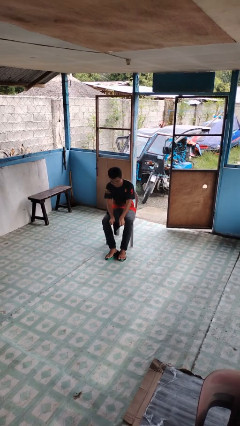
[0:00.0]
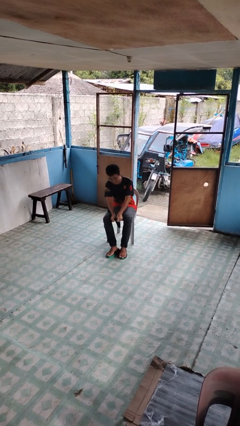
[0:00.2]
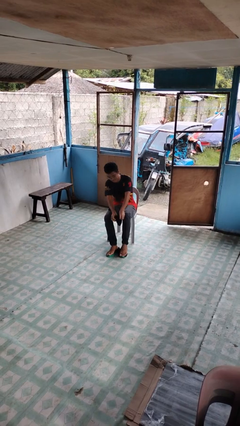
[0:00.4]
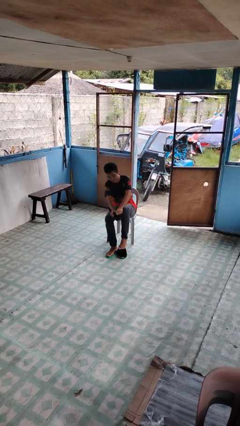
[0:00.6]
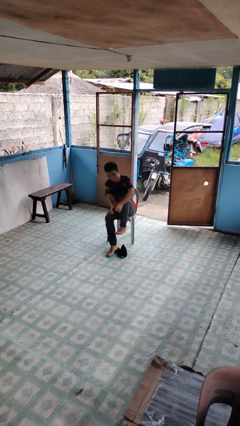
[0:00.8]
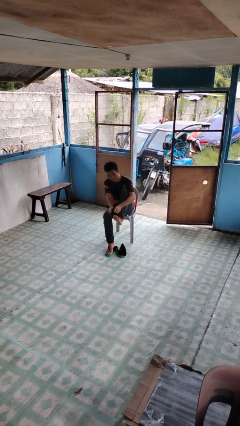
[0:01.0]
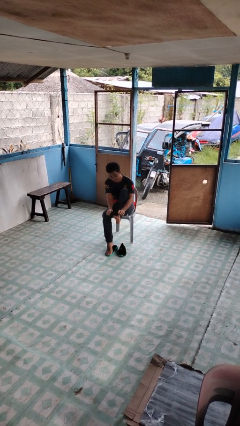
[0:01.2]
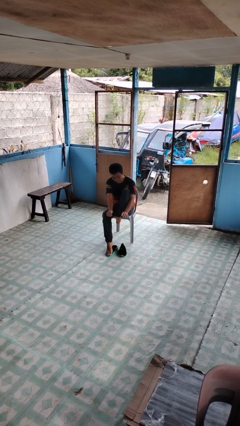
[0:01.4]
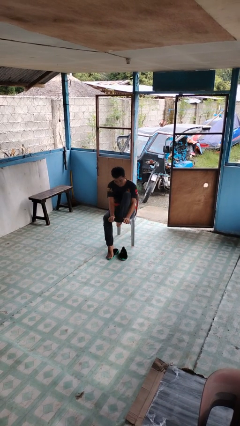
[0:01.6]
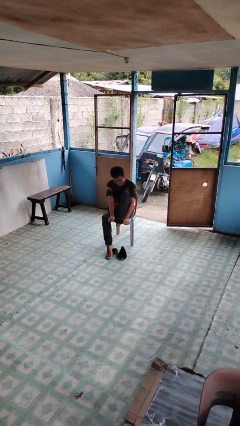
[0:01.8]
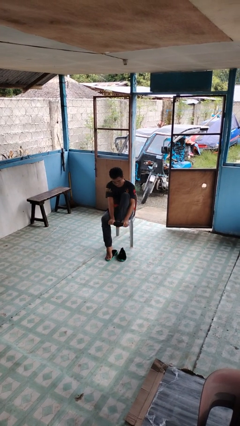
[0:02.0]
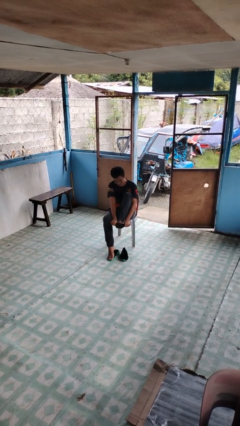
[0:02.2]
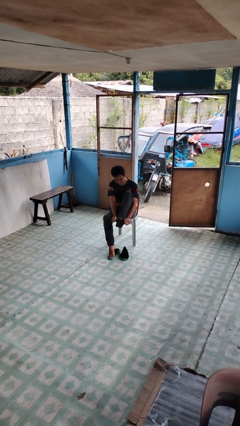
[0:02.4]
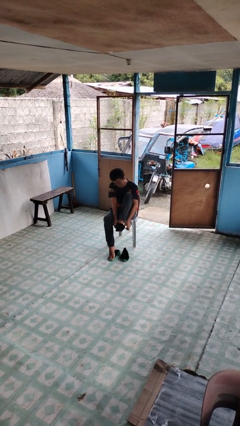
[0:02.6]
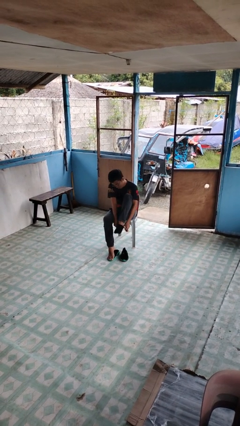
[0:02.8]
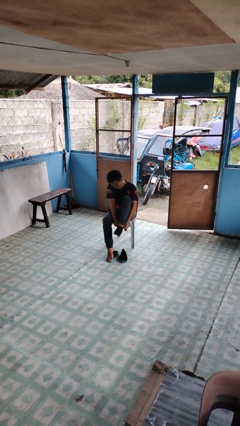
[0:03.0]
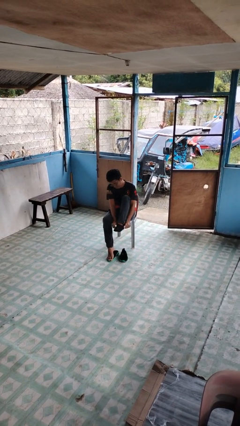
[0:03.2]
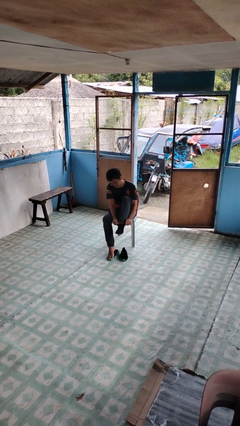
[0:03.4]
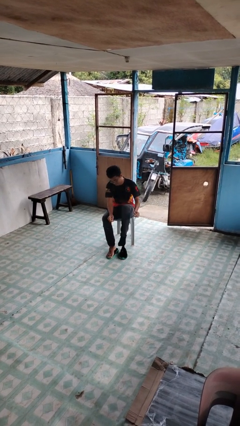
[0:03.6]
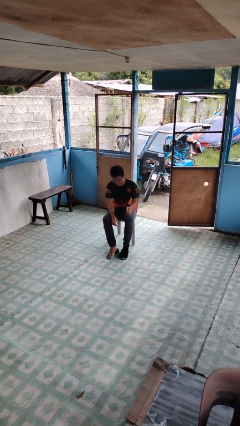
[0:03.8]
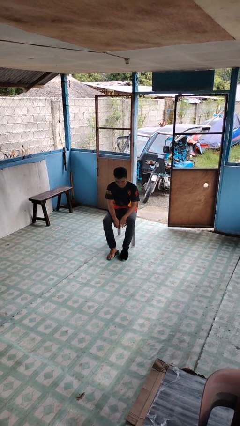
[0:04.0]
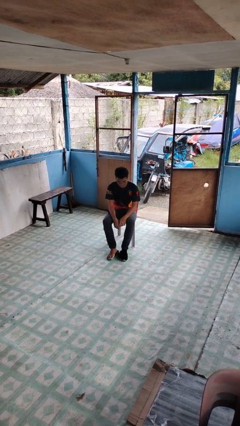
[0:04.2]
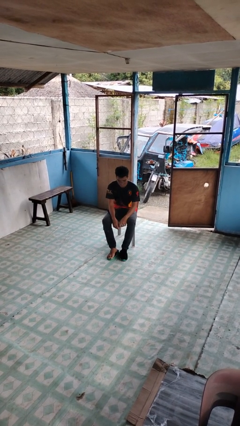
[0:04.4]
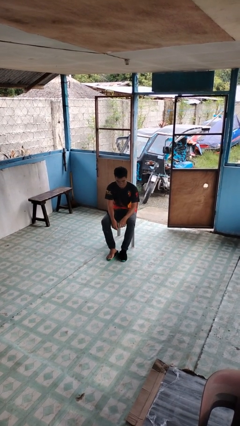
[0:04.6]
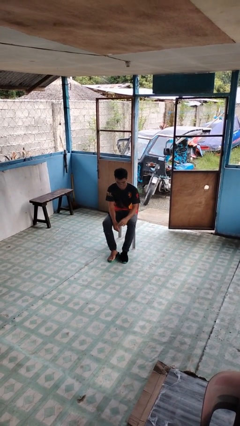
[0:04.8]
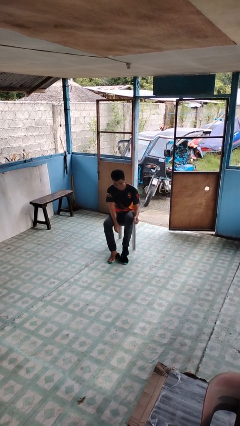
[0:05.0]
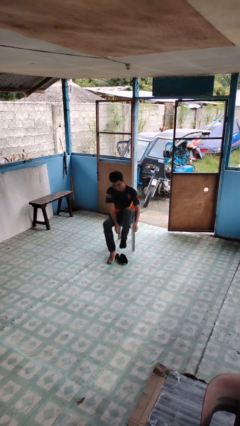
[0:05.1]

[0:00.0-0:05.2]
person puts on socks

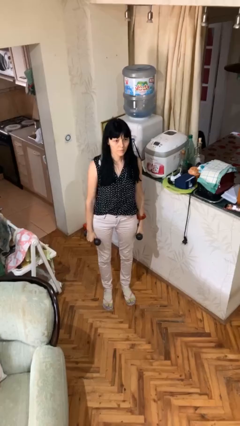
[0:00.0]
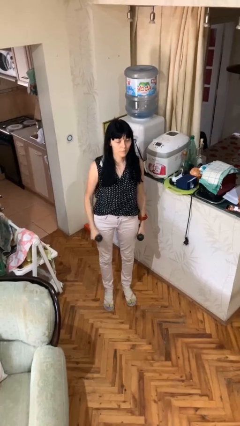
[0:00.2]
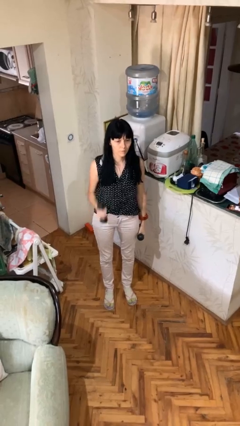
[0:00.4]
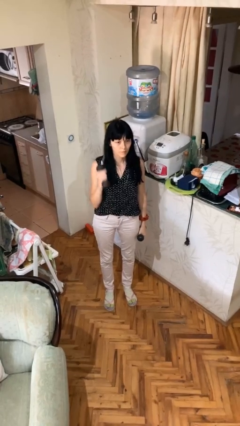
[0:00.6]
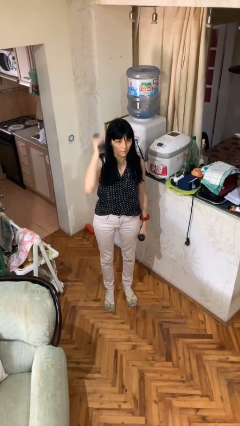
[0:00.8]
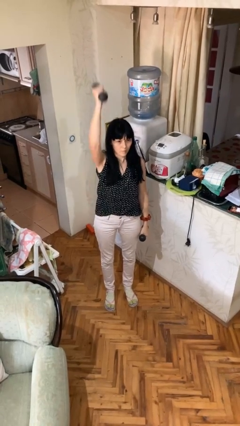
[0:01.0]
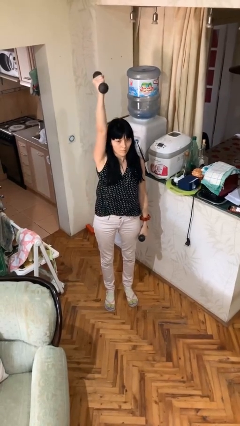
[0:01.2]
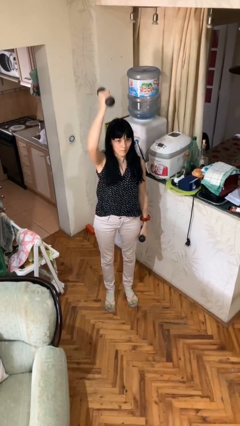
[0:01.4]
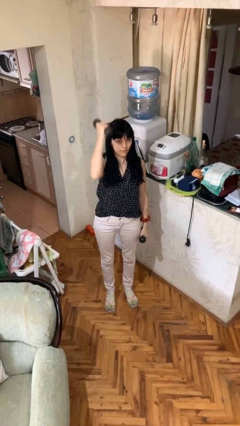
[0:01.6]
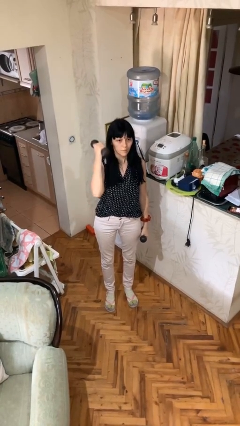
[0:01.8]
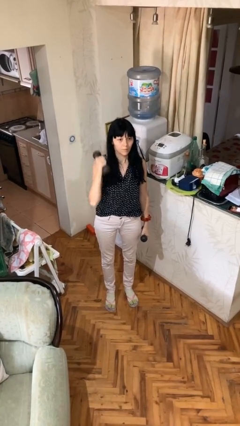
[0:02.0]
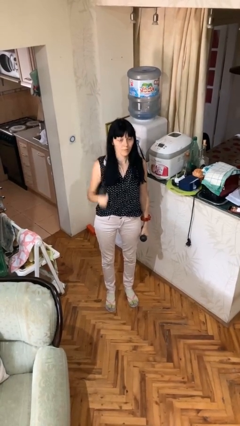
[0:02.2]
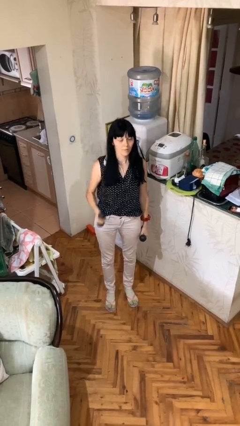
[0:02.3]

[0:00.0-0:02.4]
person lifts dumbbells

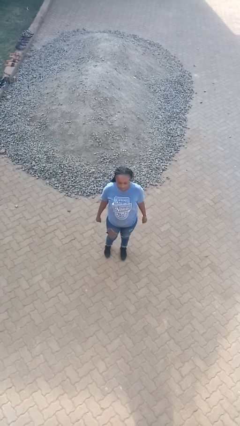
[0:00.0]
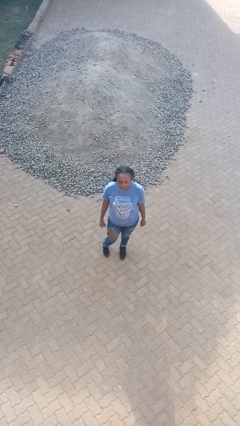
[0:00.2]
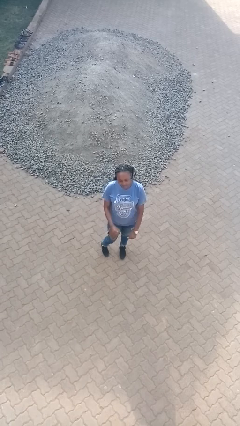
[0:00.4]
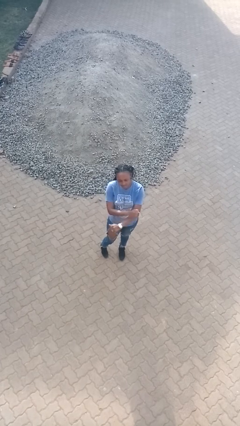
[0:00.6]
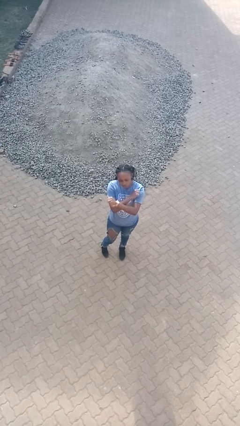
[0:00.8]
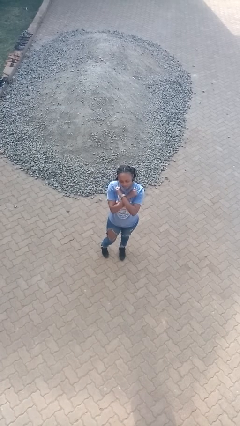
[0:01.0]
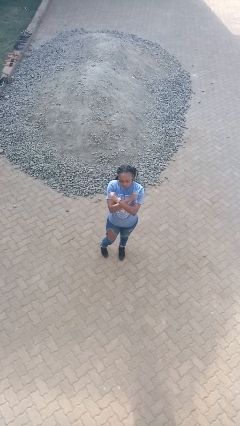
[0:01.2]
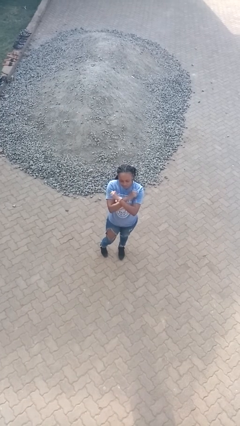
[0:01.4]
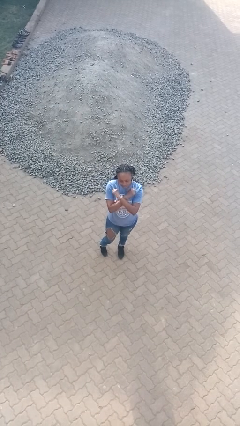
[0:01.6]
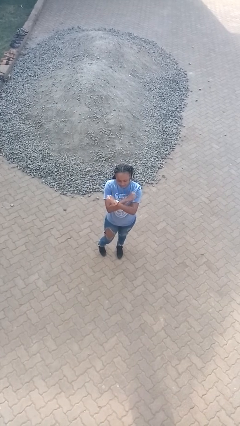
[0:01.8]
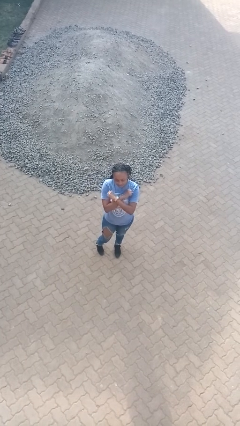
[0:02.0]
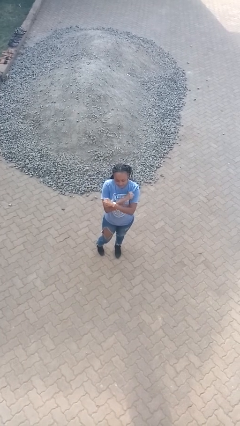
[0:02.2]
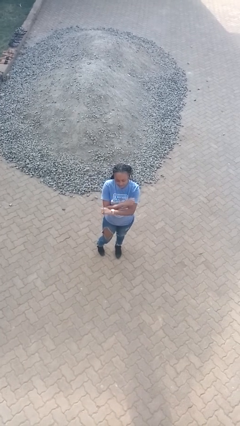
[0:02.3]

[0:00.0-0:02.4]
person gestures arms x

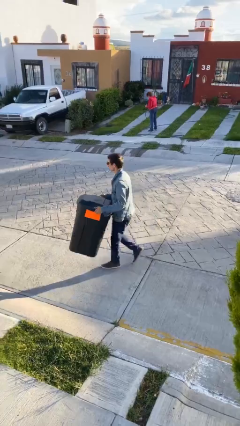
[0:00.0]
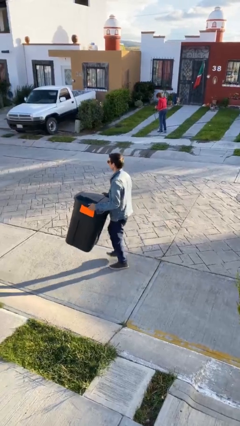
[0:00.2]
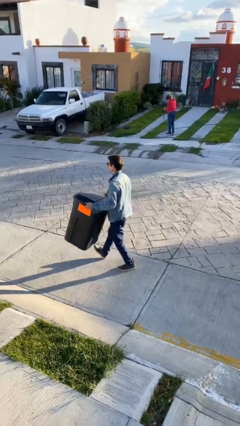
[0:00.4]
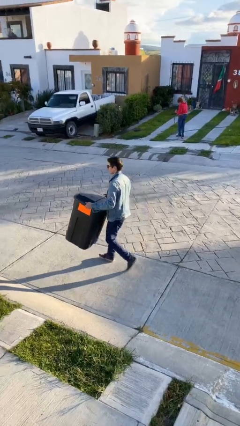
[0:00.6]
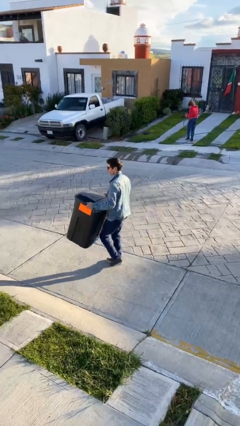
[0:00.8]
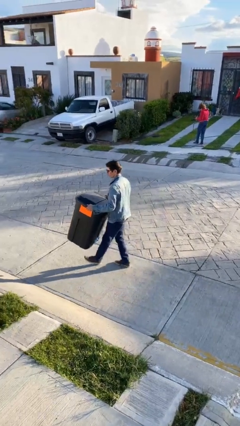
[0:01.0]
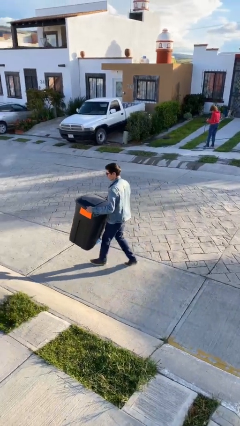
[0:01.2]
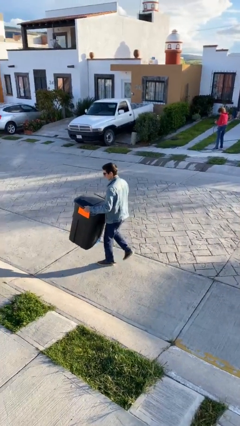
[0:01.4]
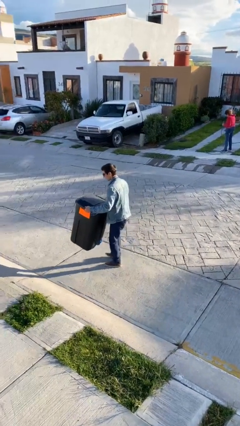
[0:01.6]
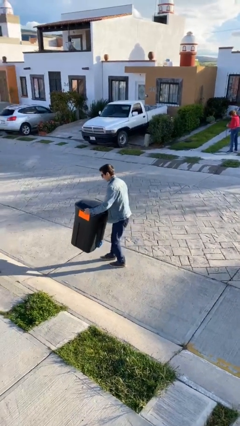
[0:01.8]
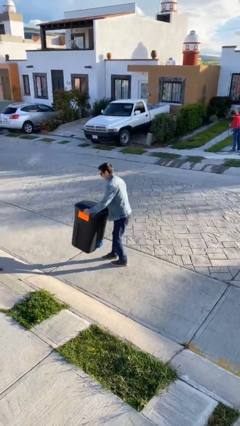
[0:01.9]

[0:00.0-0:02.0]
person carries heavy object

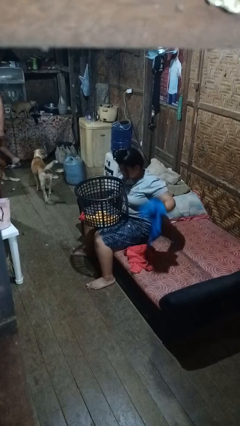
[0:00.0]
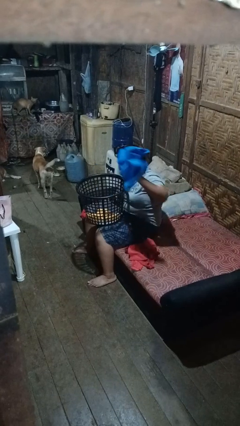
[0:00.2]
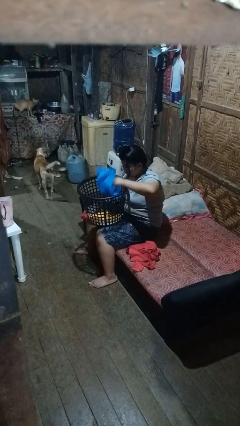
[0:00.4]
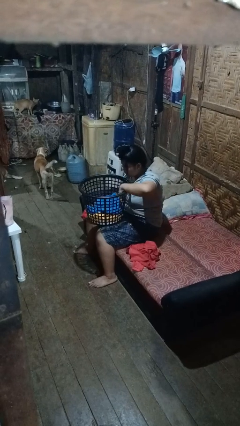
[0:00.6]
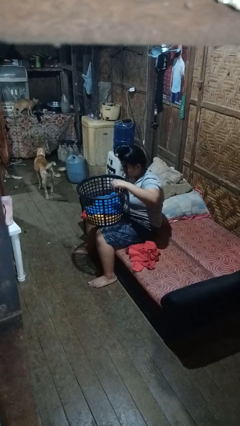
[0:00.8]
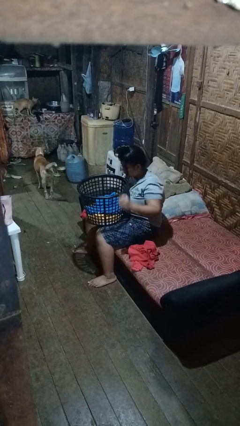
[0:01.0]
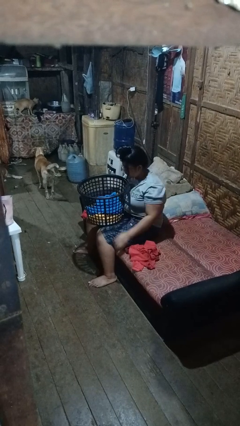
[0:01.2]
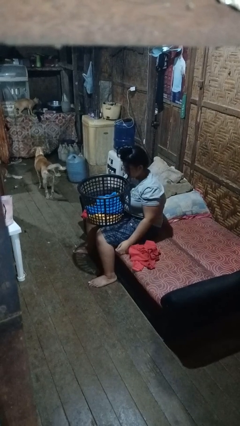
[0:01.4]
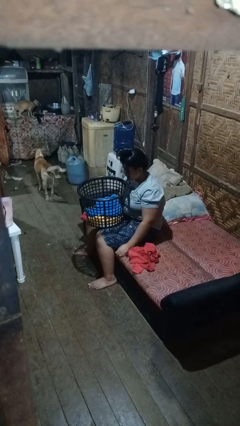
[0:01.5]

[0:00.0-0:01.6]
person puts object into basket

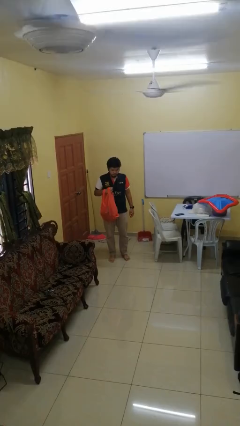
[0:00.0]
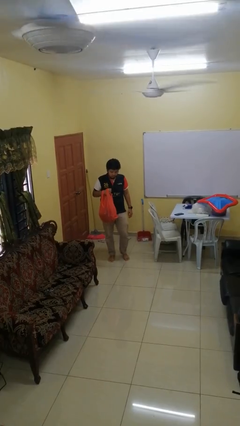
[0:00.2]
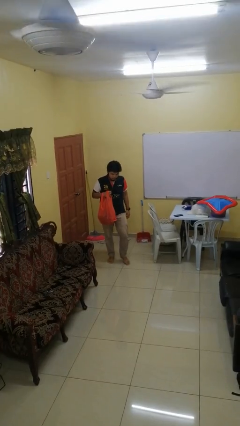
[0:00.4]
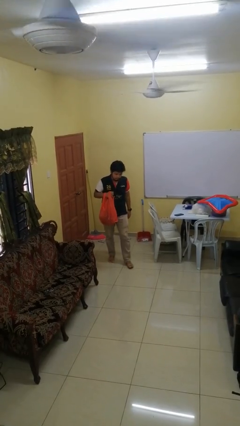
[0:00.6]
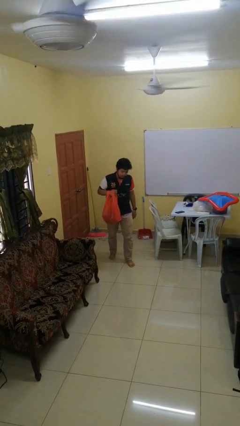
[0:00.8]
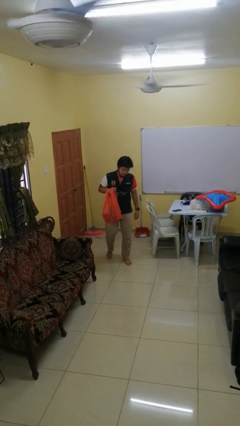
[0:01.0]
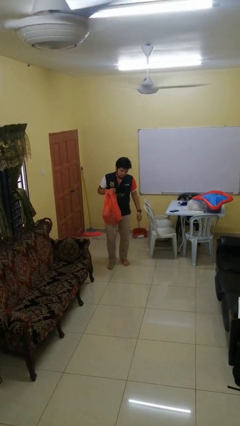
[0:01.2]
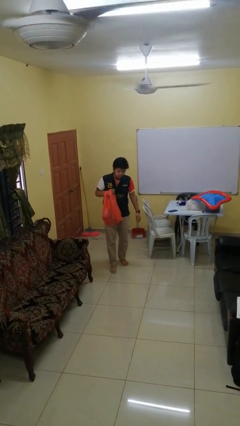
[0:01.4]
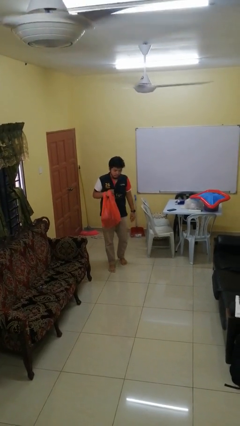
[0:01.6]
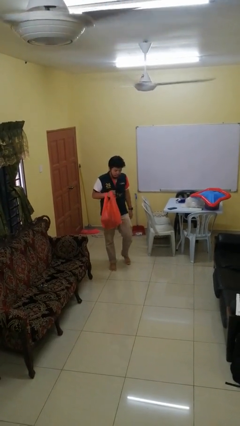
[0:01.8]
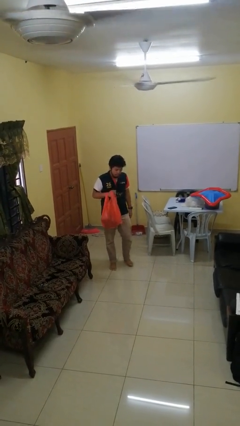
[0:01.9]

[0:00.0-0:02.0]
person carries groceries

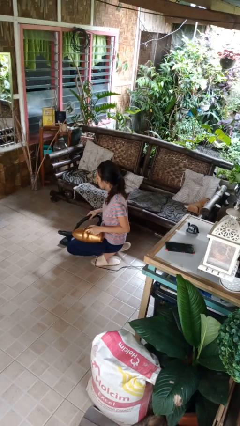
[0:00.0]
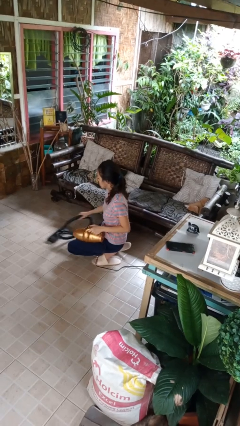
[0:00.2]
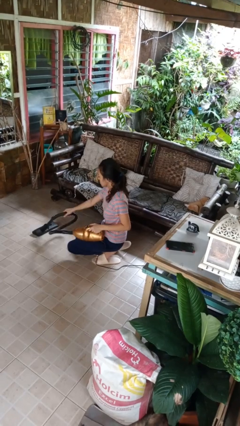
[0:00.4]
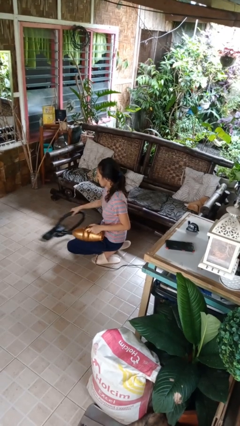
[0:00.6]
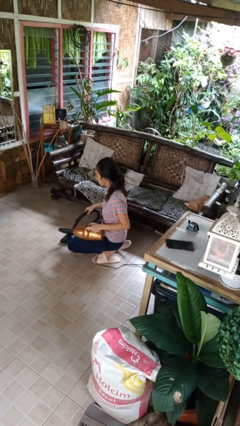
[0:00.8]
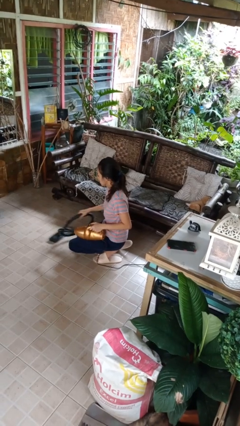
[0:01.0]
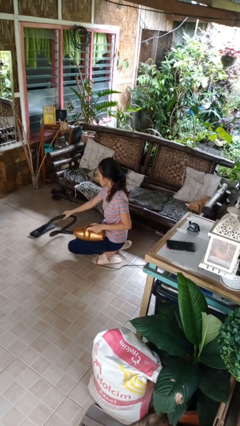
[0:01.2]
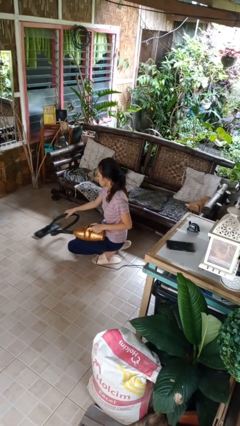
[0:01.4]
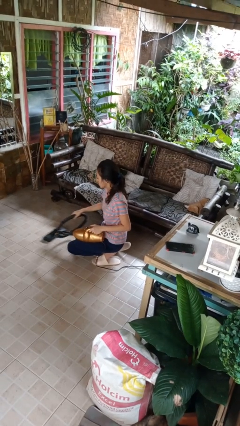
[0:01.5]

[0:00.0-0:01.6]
person vacuums carpet
